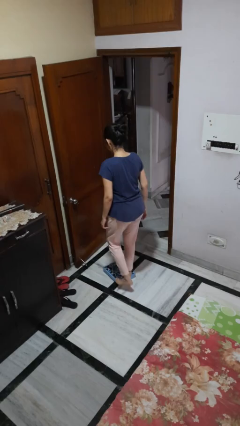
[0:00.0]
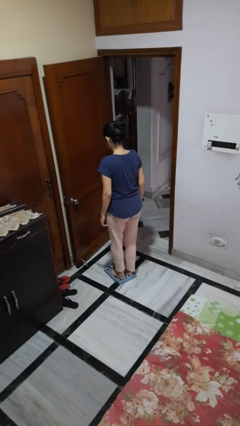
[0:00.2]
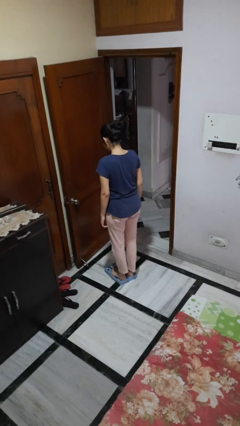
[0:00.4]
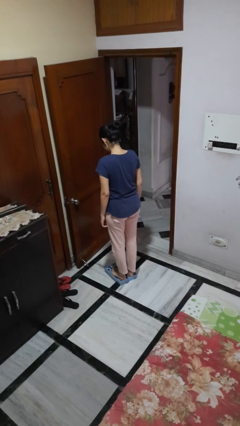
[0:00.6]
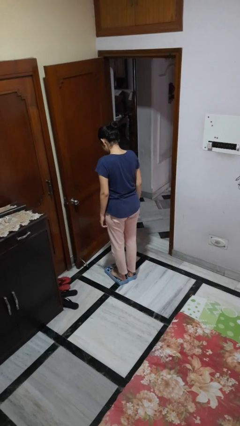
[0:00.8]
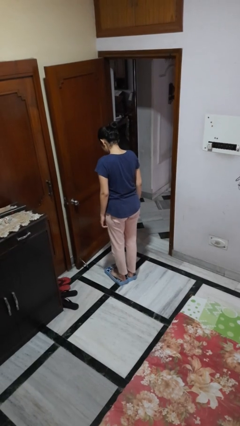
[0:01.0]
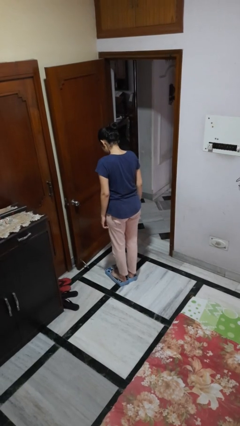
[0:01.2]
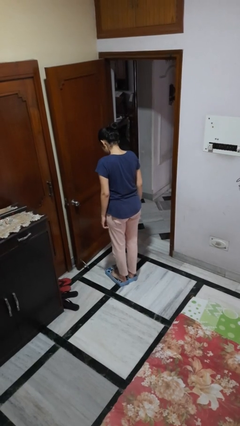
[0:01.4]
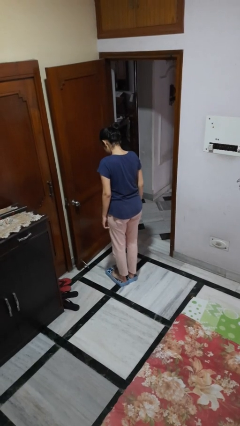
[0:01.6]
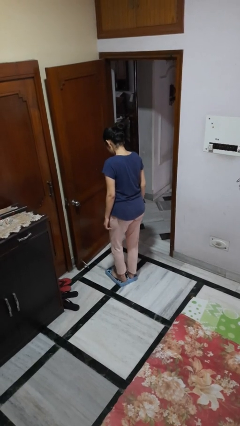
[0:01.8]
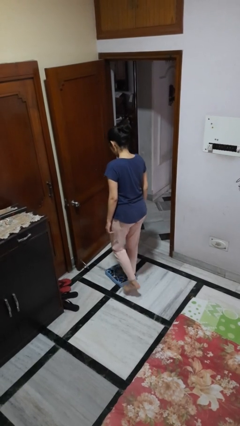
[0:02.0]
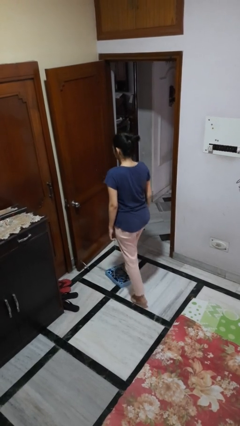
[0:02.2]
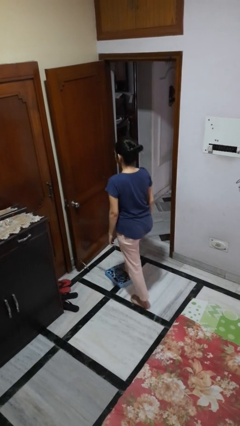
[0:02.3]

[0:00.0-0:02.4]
person uses bodyweight scale

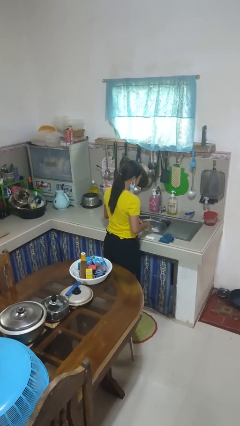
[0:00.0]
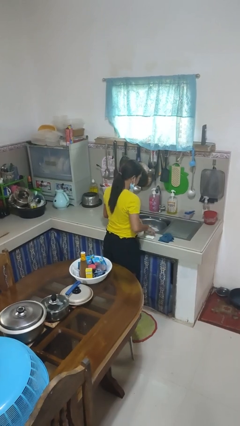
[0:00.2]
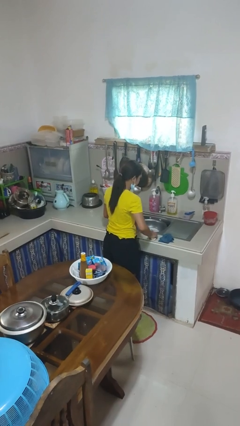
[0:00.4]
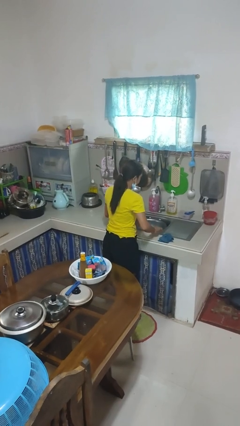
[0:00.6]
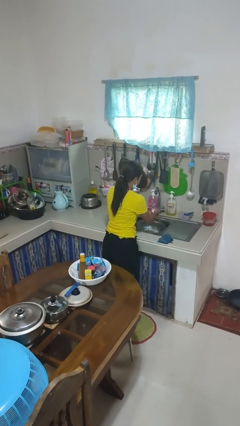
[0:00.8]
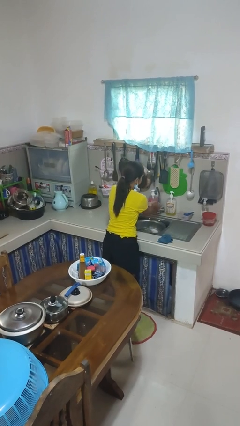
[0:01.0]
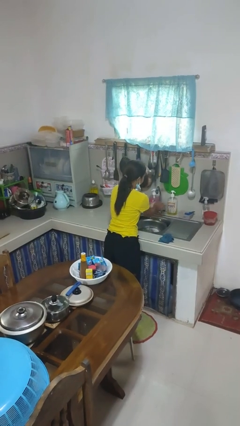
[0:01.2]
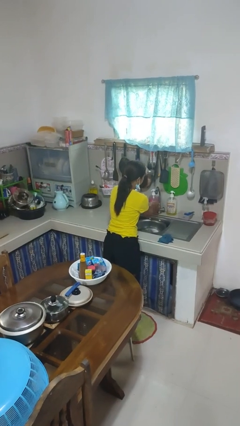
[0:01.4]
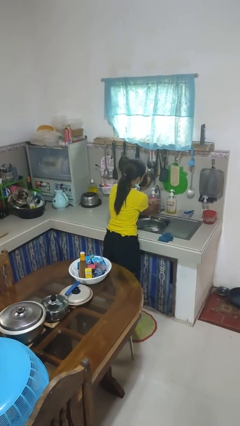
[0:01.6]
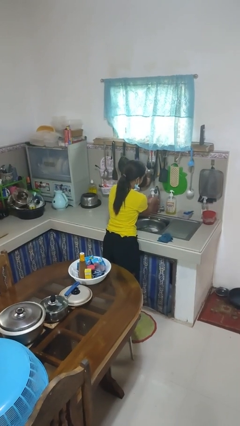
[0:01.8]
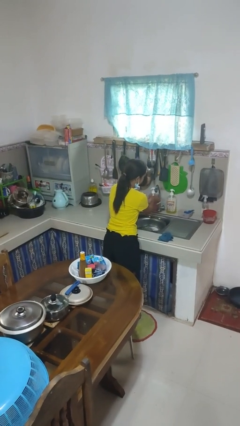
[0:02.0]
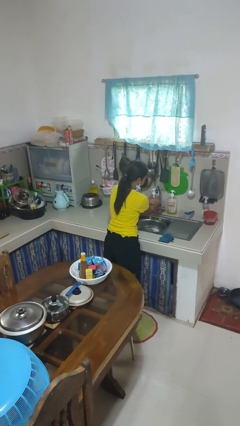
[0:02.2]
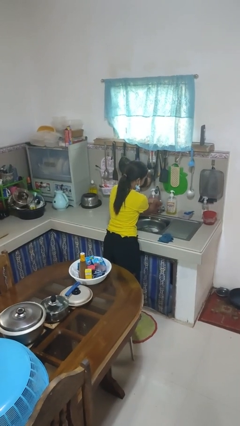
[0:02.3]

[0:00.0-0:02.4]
person washes hands

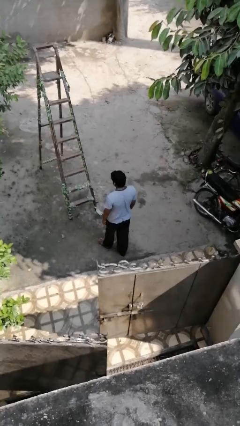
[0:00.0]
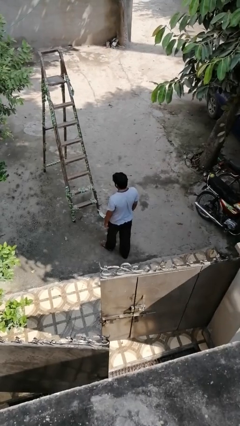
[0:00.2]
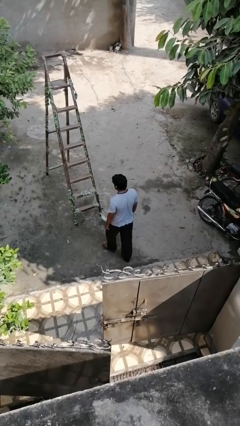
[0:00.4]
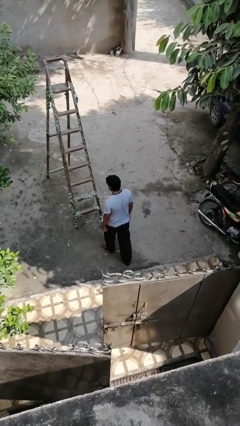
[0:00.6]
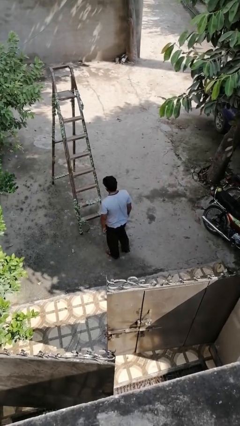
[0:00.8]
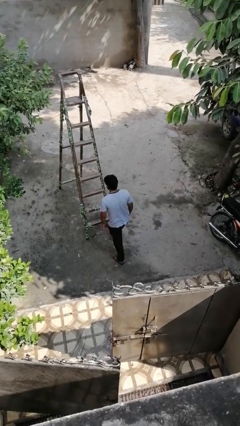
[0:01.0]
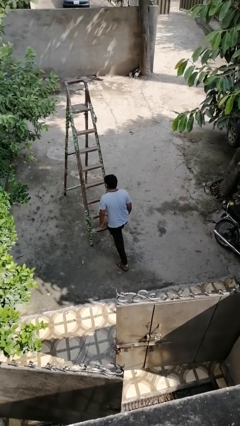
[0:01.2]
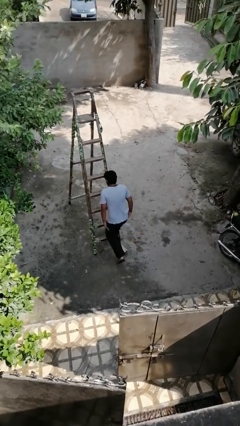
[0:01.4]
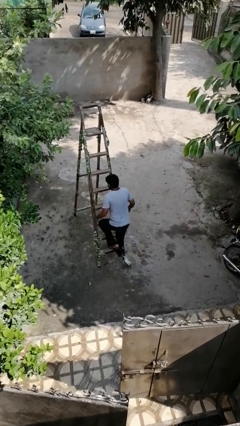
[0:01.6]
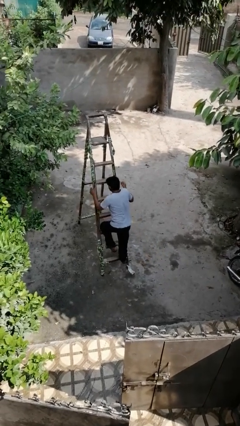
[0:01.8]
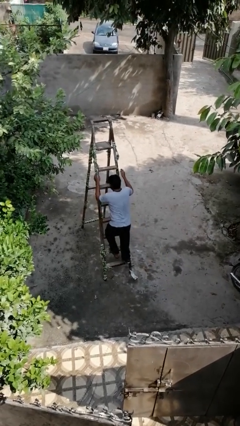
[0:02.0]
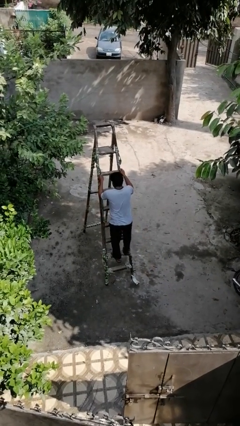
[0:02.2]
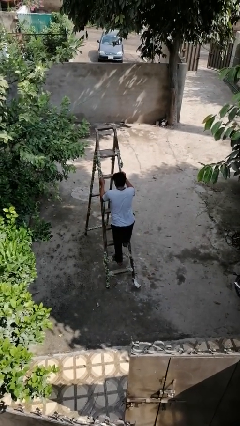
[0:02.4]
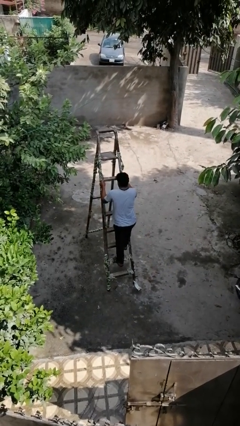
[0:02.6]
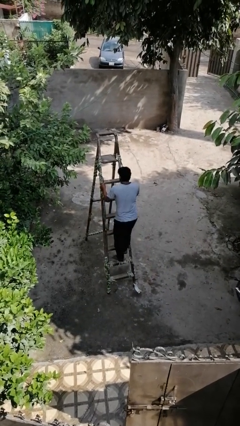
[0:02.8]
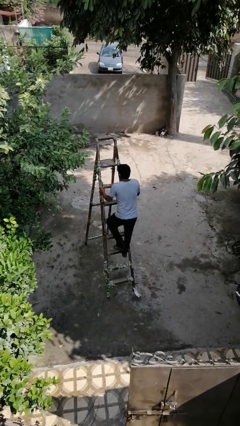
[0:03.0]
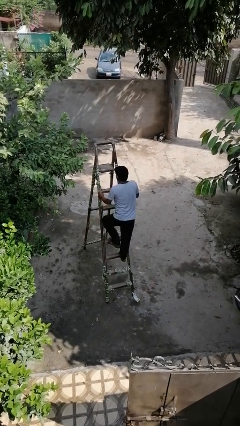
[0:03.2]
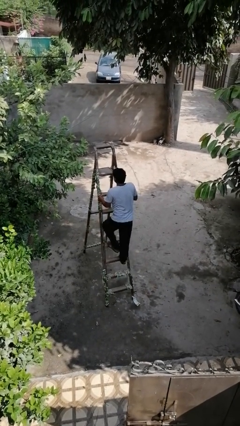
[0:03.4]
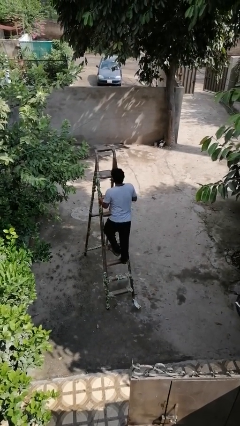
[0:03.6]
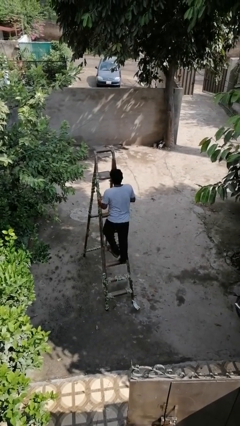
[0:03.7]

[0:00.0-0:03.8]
person climbs up ladder

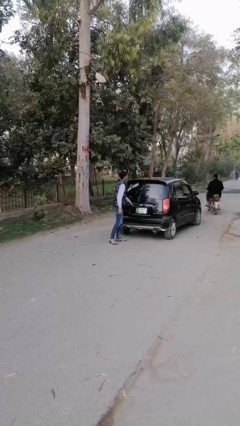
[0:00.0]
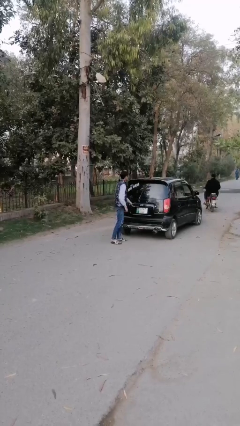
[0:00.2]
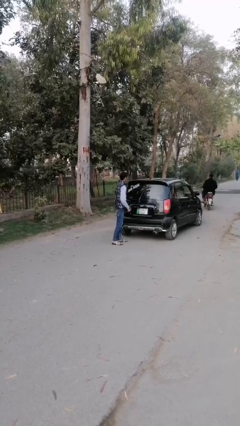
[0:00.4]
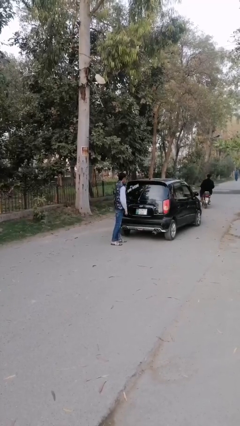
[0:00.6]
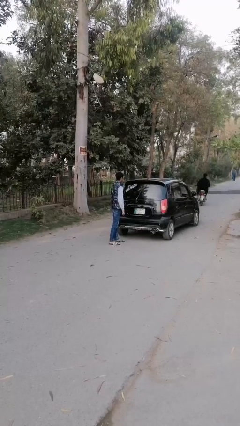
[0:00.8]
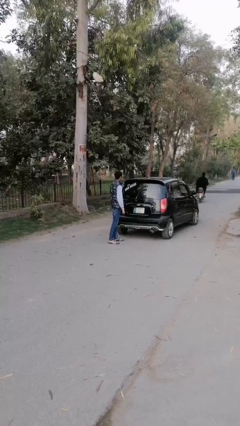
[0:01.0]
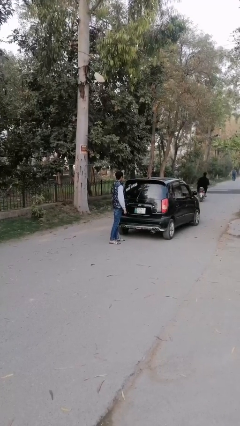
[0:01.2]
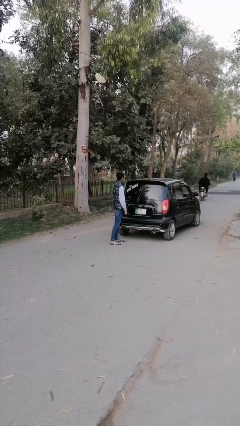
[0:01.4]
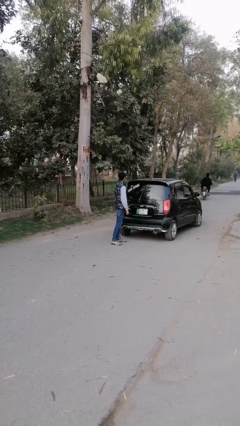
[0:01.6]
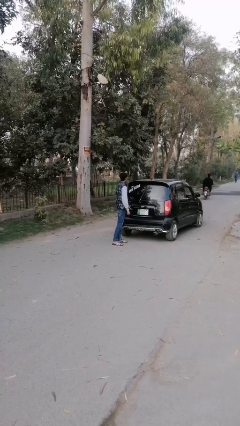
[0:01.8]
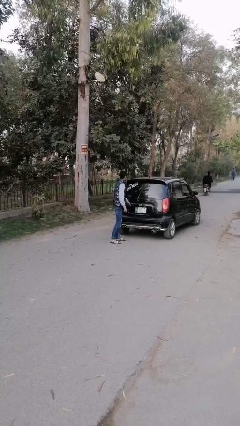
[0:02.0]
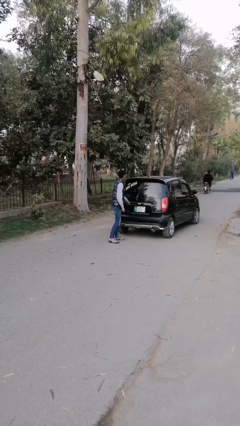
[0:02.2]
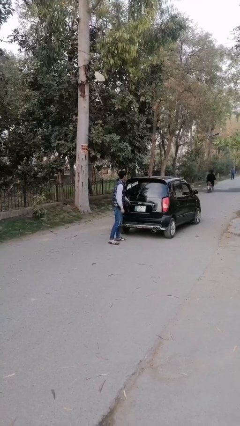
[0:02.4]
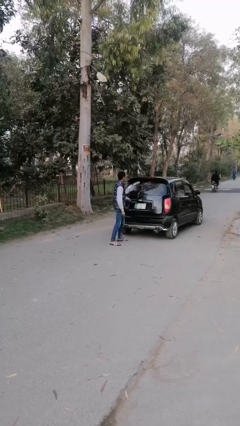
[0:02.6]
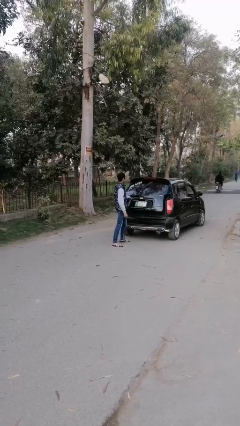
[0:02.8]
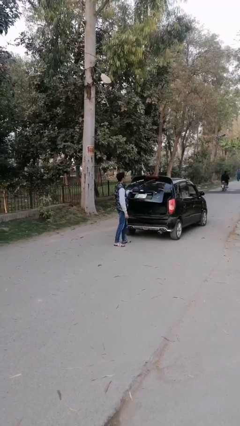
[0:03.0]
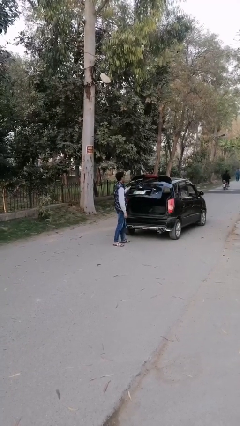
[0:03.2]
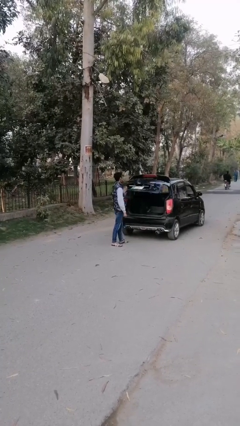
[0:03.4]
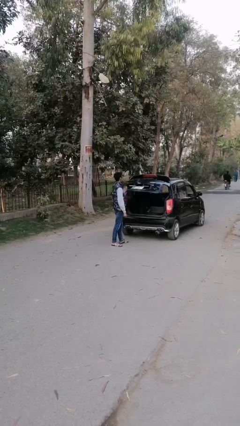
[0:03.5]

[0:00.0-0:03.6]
person closes car trunk

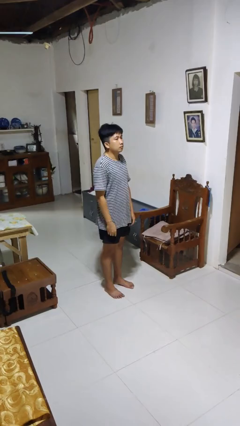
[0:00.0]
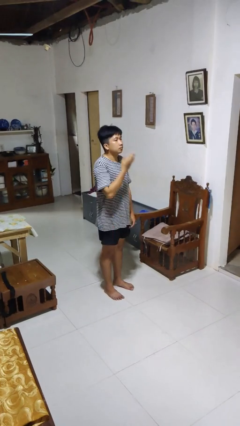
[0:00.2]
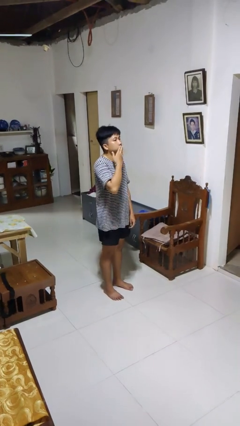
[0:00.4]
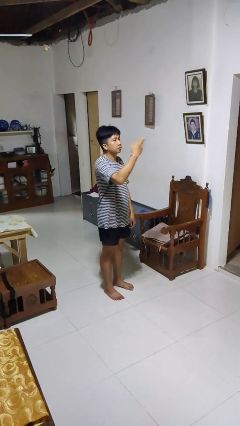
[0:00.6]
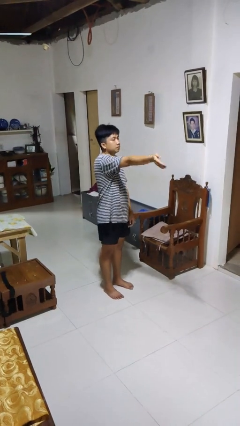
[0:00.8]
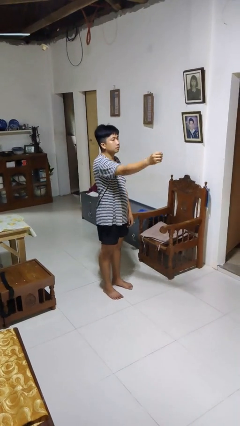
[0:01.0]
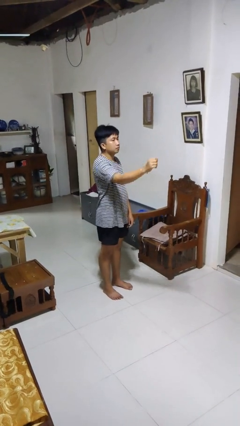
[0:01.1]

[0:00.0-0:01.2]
person gestures blow kiss

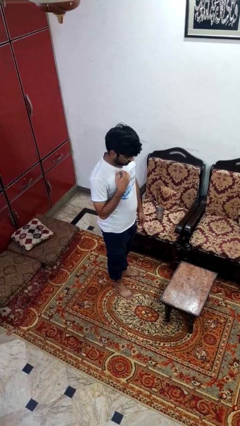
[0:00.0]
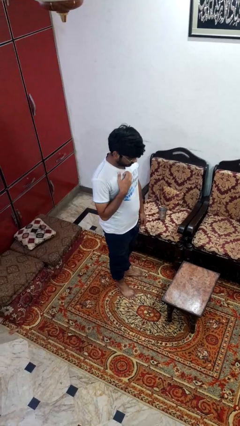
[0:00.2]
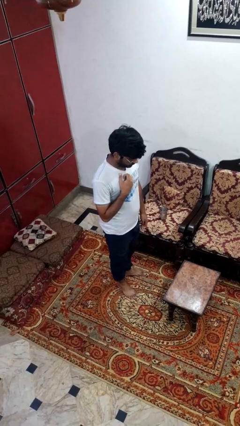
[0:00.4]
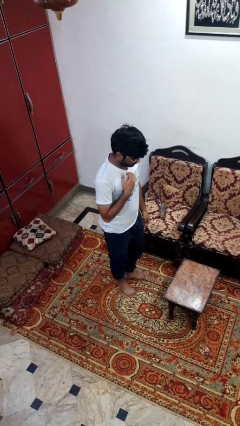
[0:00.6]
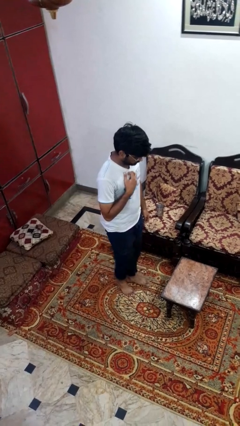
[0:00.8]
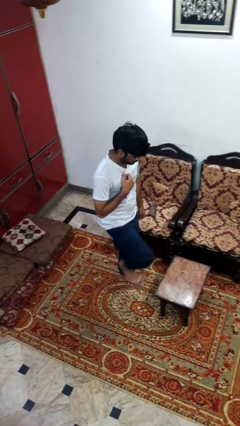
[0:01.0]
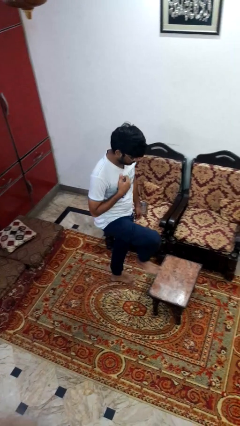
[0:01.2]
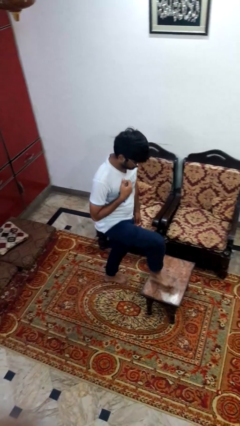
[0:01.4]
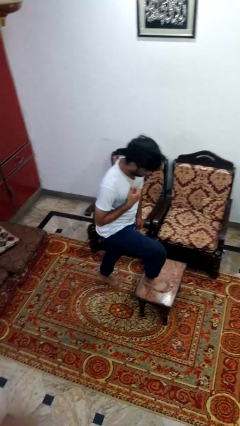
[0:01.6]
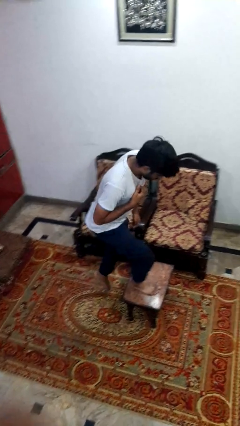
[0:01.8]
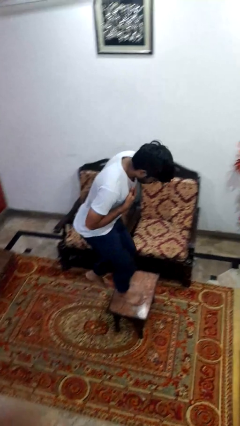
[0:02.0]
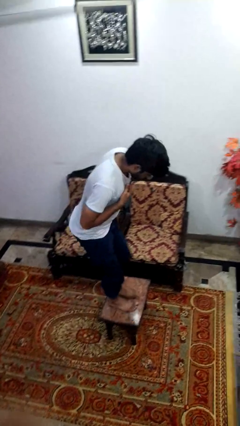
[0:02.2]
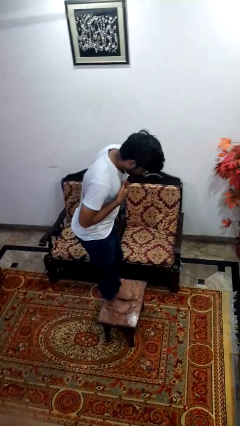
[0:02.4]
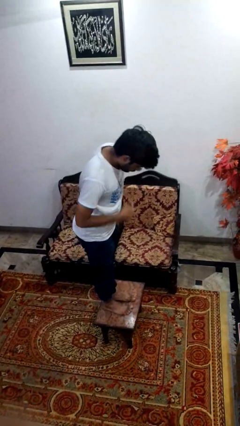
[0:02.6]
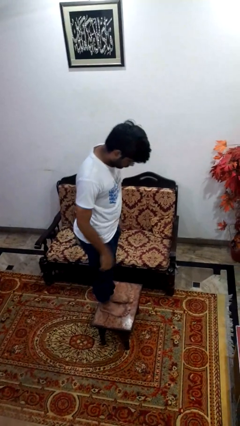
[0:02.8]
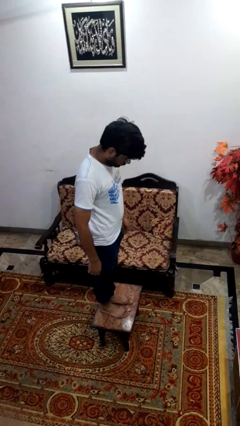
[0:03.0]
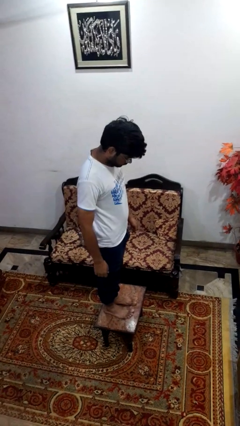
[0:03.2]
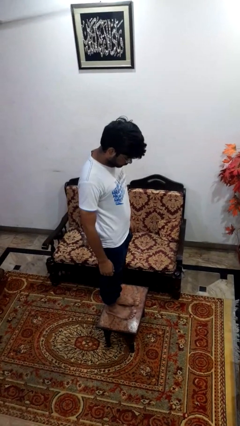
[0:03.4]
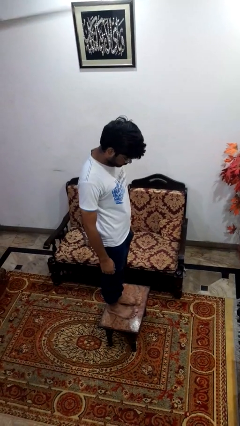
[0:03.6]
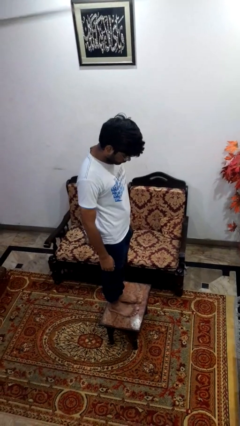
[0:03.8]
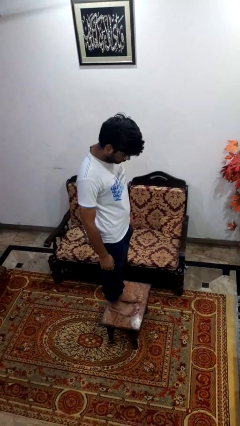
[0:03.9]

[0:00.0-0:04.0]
person climbs on table
